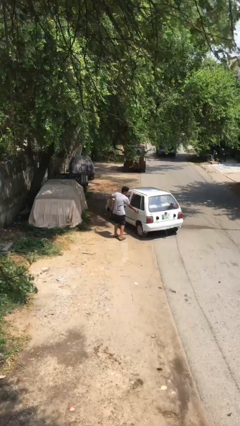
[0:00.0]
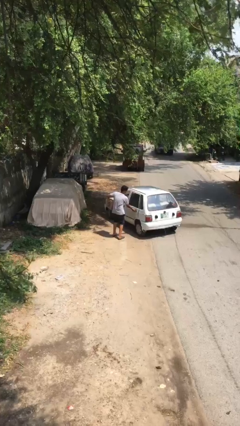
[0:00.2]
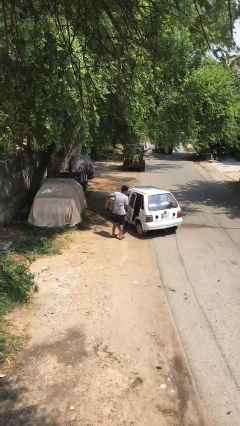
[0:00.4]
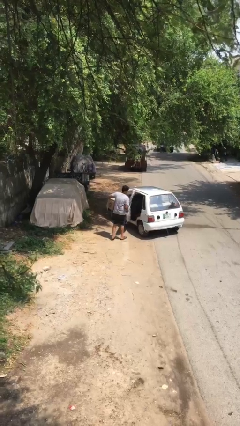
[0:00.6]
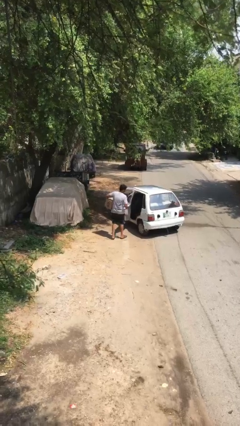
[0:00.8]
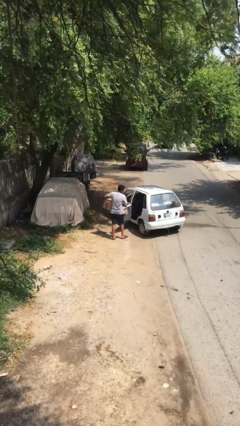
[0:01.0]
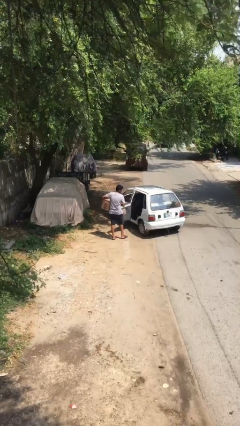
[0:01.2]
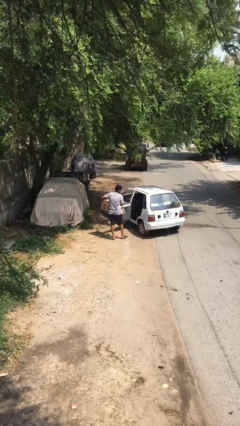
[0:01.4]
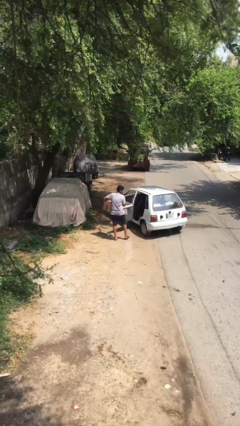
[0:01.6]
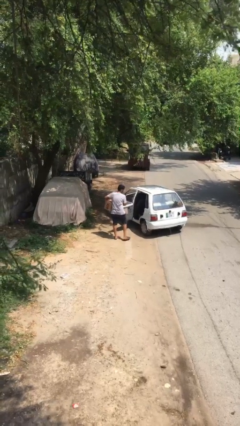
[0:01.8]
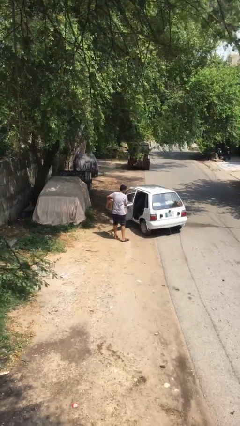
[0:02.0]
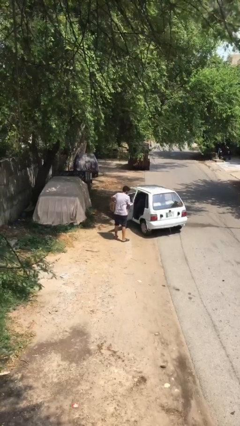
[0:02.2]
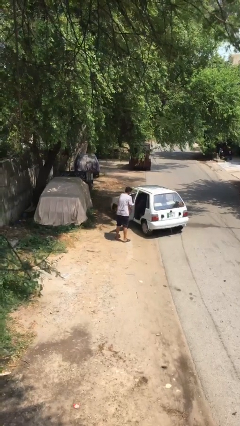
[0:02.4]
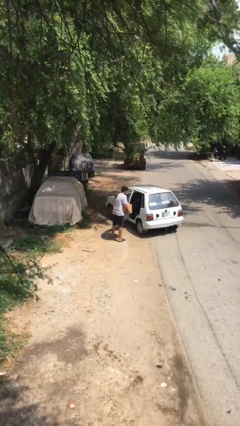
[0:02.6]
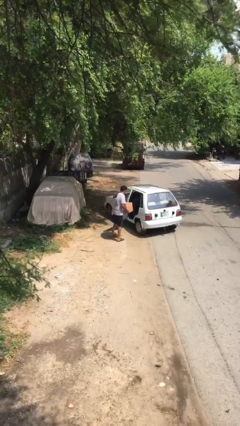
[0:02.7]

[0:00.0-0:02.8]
person opens car door

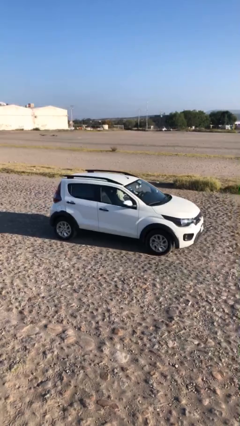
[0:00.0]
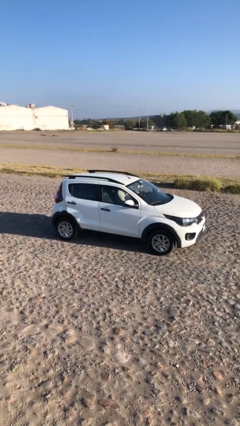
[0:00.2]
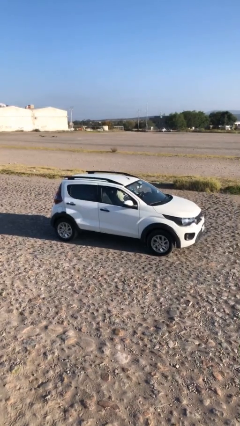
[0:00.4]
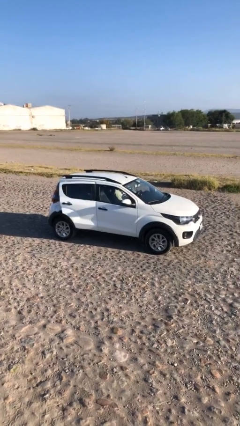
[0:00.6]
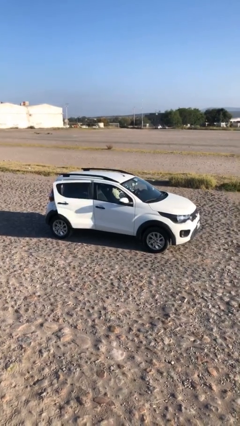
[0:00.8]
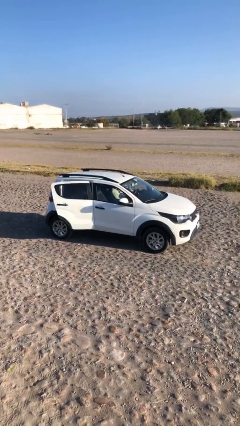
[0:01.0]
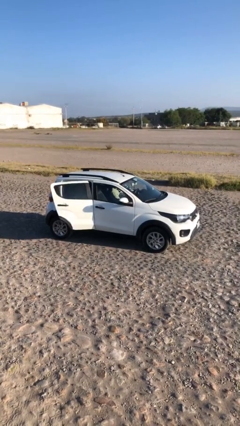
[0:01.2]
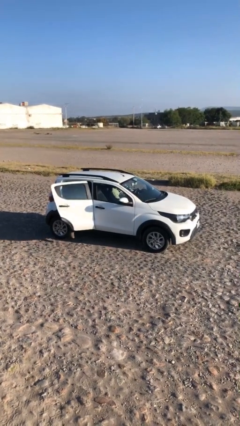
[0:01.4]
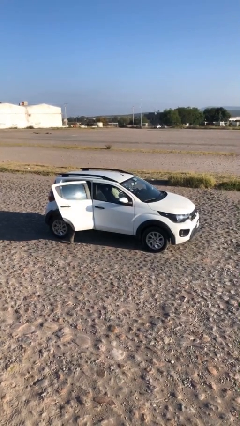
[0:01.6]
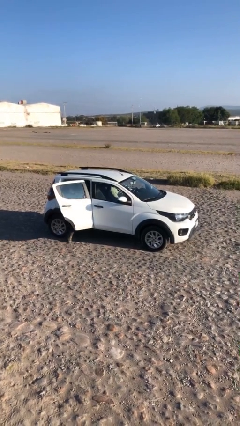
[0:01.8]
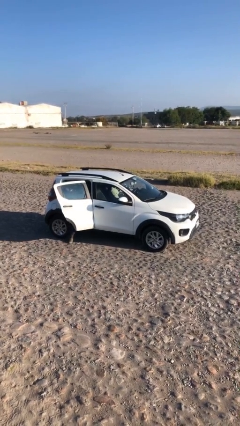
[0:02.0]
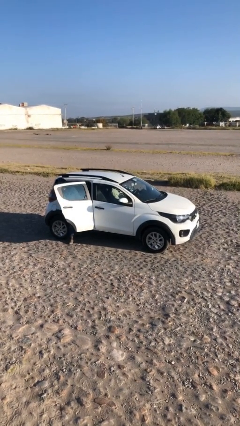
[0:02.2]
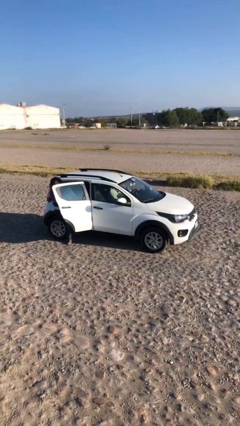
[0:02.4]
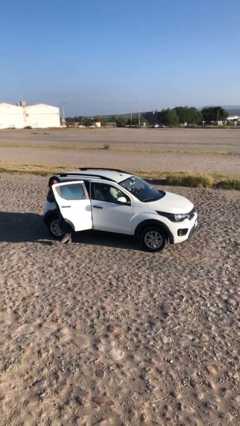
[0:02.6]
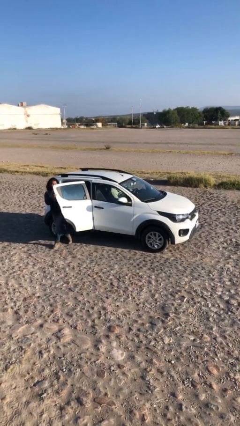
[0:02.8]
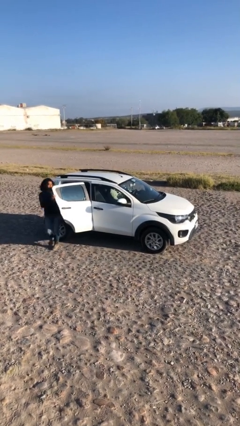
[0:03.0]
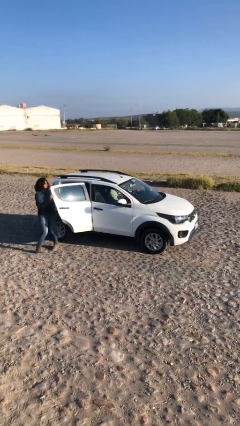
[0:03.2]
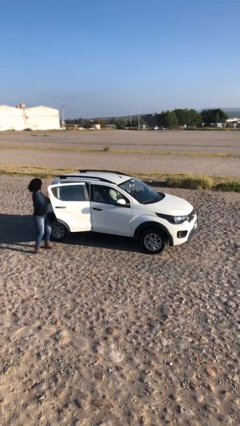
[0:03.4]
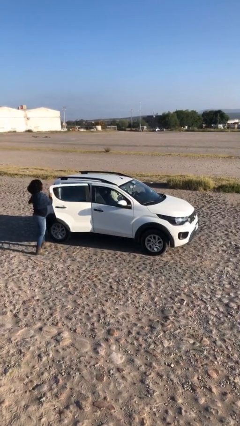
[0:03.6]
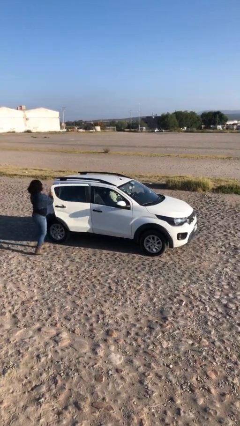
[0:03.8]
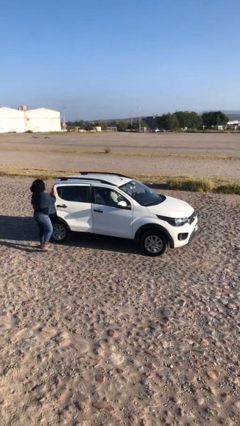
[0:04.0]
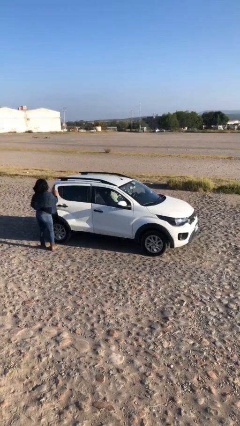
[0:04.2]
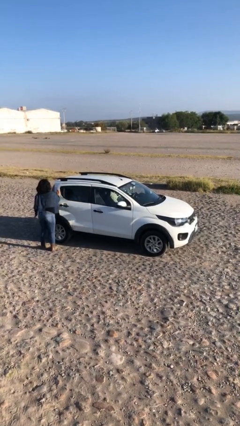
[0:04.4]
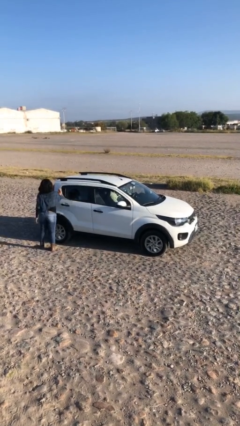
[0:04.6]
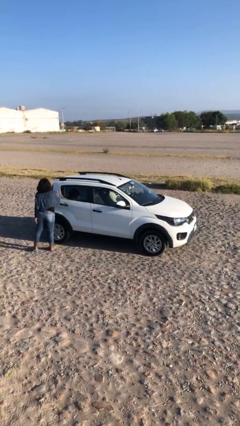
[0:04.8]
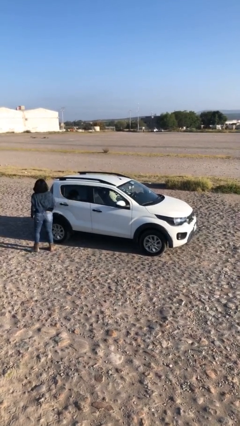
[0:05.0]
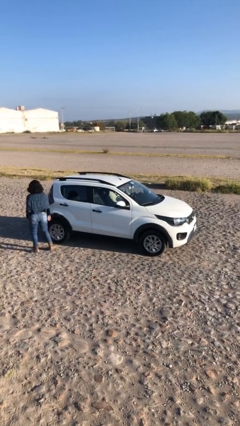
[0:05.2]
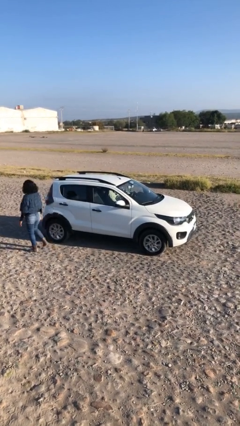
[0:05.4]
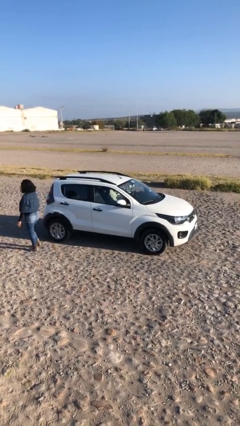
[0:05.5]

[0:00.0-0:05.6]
car drops off person

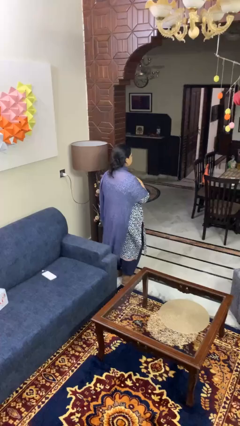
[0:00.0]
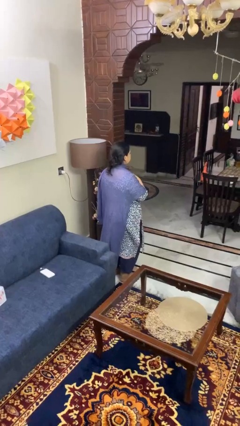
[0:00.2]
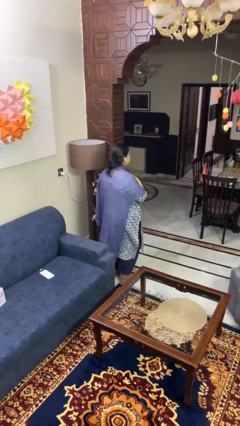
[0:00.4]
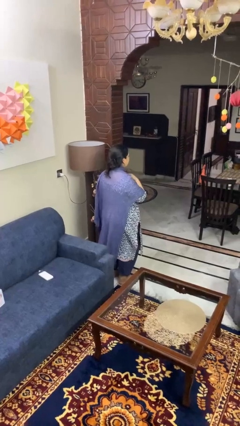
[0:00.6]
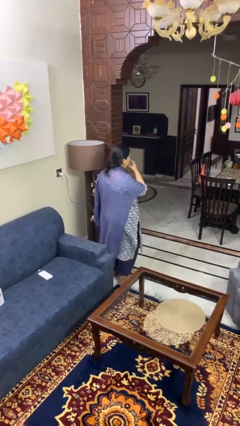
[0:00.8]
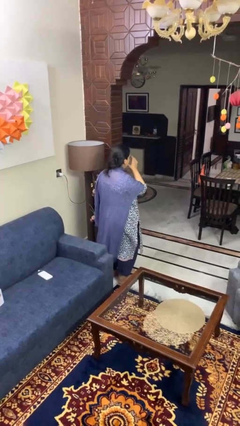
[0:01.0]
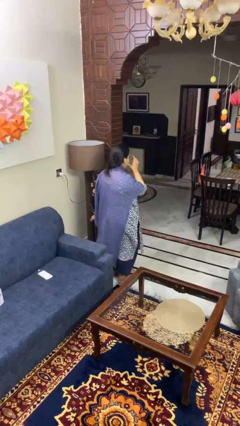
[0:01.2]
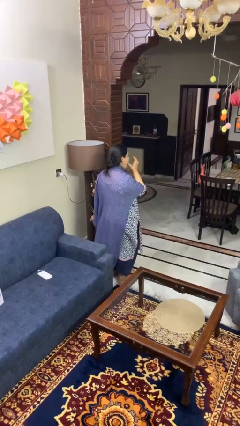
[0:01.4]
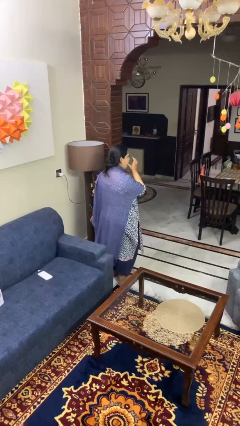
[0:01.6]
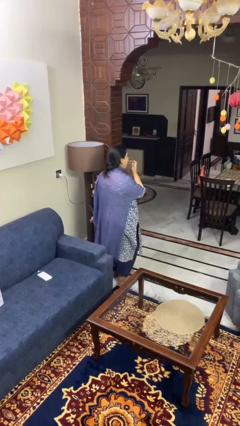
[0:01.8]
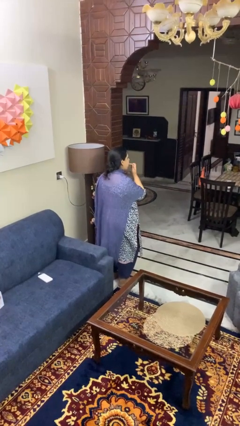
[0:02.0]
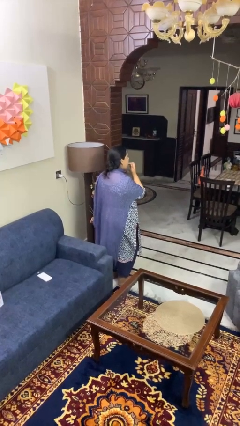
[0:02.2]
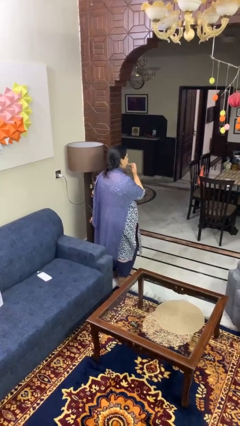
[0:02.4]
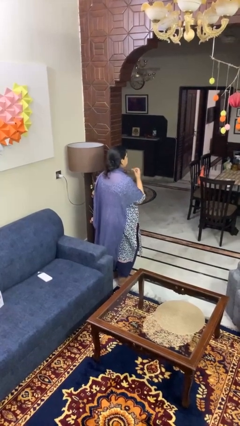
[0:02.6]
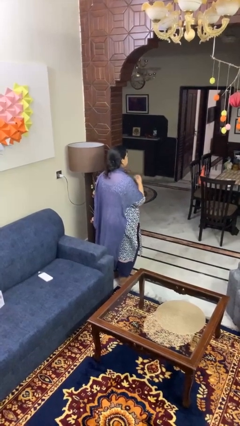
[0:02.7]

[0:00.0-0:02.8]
person licks fingers

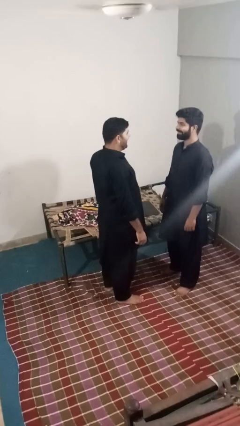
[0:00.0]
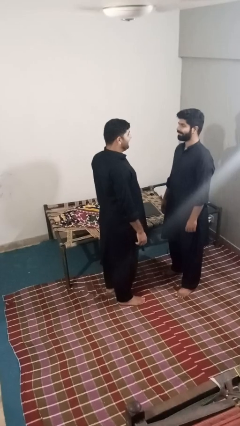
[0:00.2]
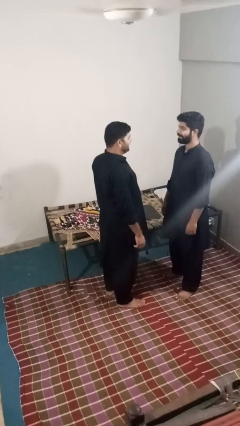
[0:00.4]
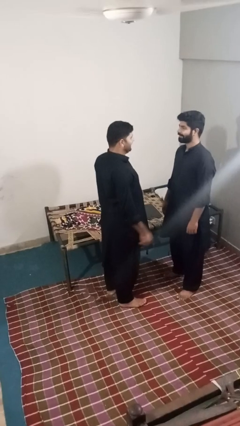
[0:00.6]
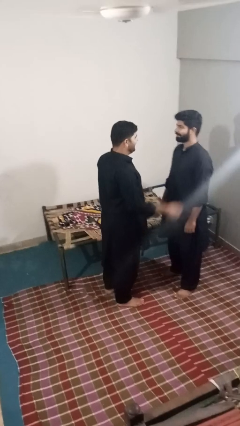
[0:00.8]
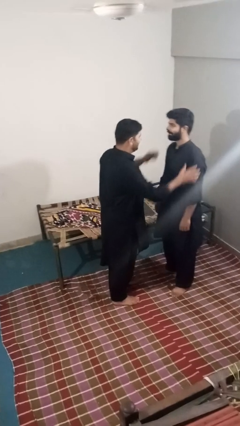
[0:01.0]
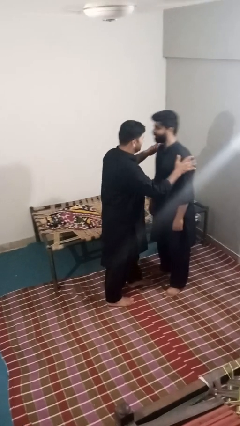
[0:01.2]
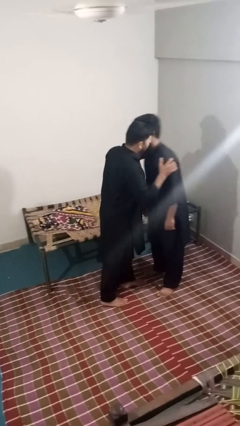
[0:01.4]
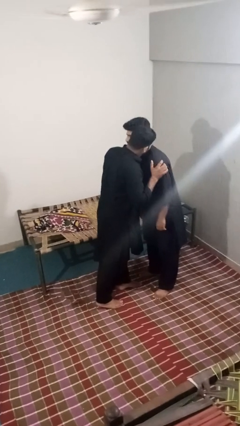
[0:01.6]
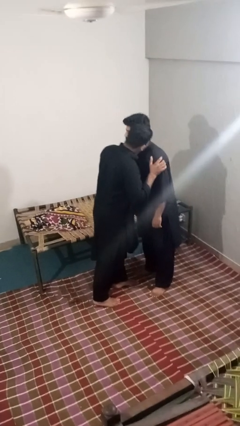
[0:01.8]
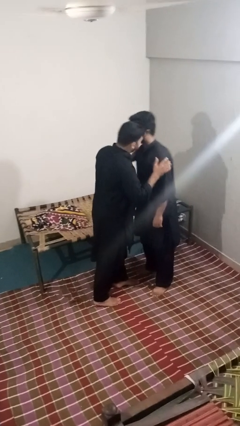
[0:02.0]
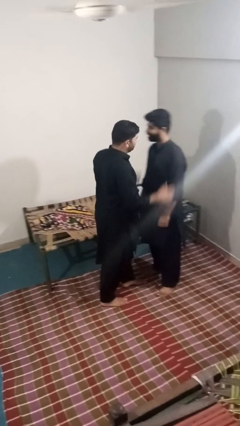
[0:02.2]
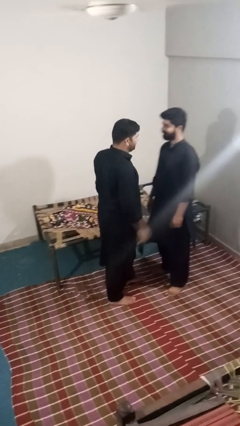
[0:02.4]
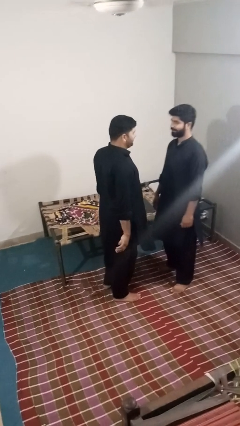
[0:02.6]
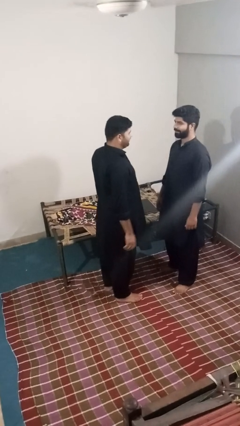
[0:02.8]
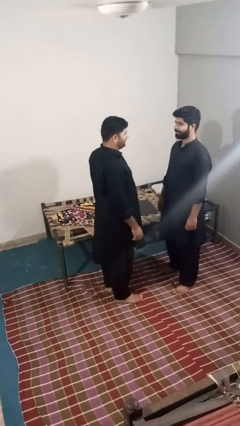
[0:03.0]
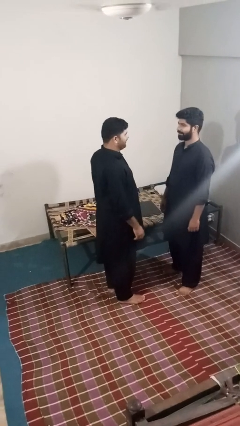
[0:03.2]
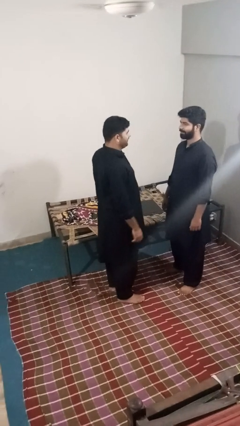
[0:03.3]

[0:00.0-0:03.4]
person kisses cheek of person

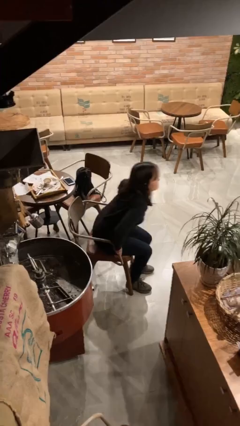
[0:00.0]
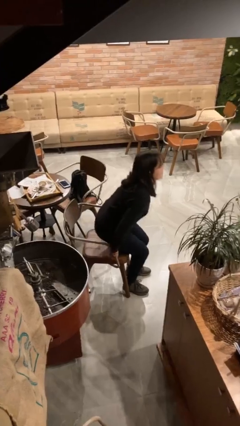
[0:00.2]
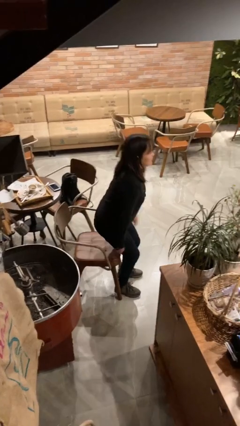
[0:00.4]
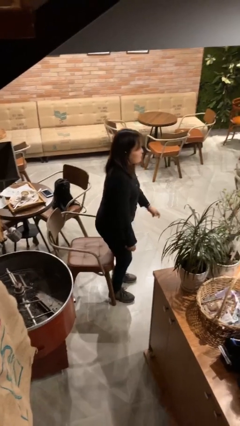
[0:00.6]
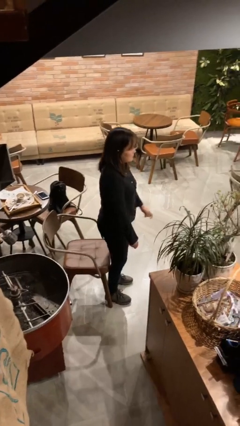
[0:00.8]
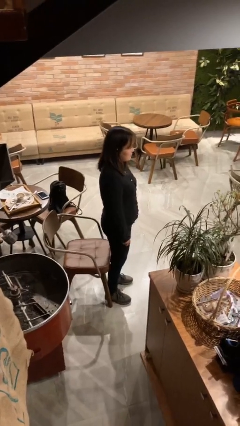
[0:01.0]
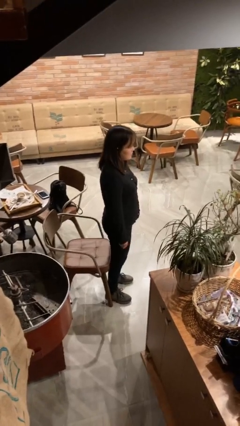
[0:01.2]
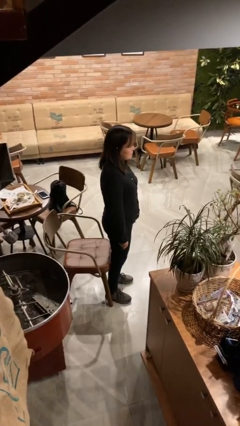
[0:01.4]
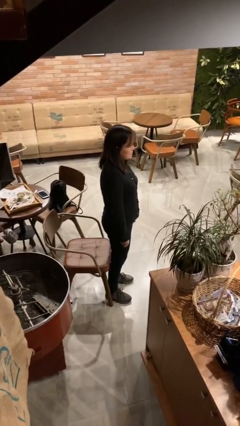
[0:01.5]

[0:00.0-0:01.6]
person stands up

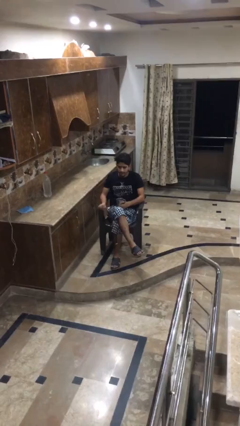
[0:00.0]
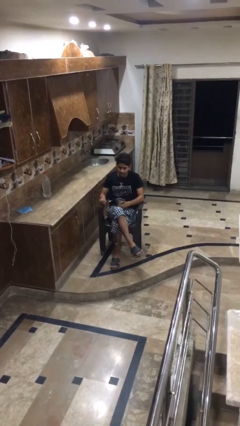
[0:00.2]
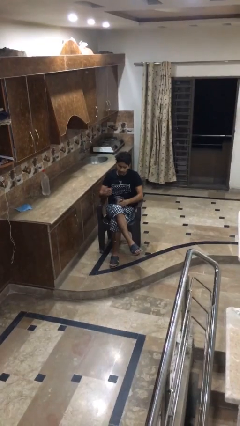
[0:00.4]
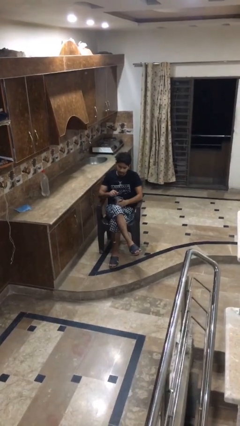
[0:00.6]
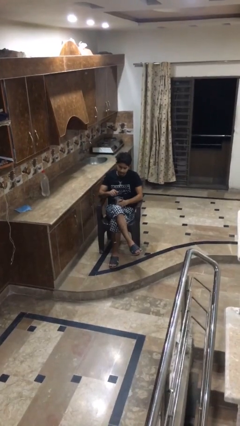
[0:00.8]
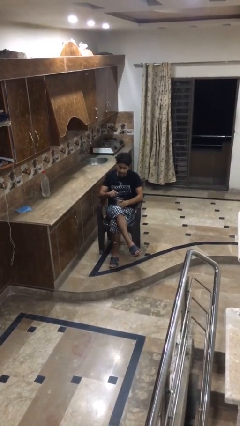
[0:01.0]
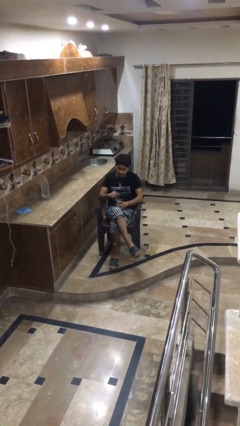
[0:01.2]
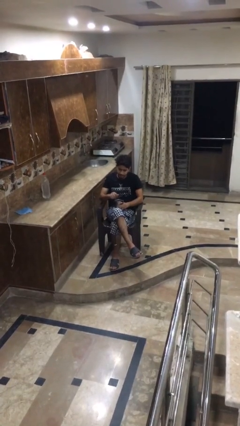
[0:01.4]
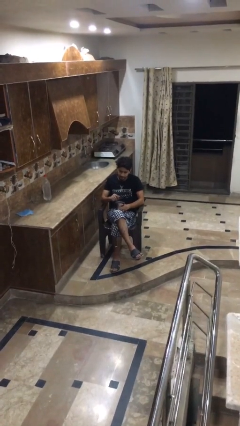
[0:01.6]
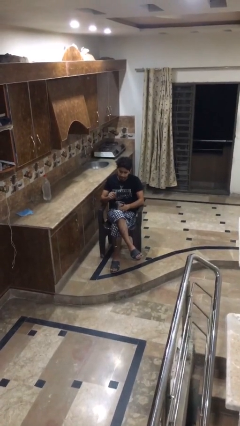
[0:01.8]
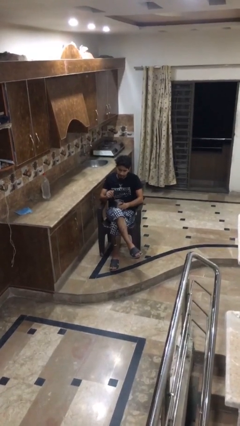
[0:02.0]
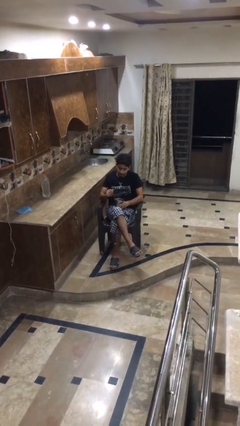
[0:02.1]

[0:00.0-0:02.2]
person stirs mug
